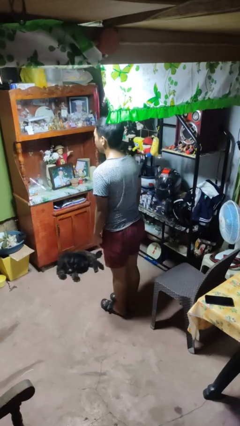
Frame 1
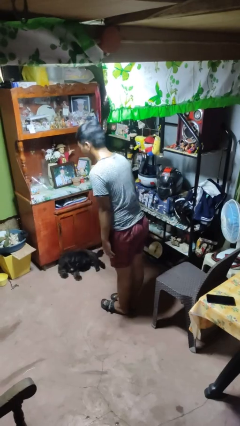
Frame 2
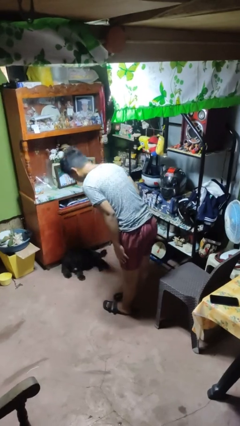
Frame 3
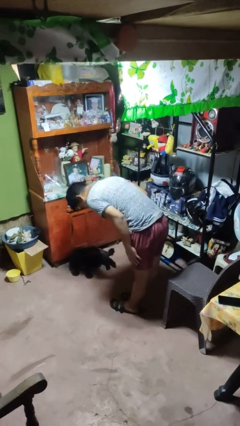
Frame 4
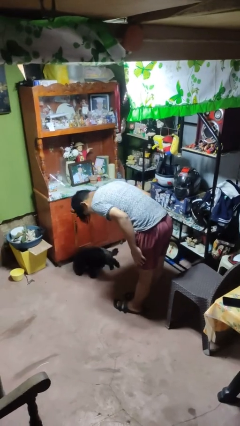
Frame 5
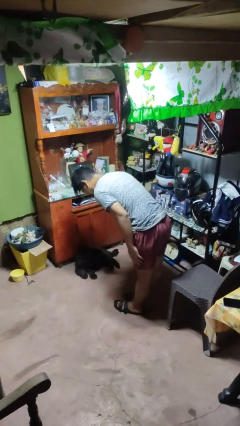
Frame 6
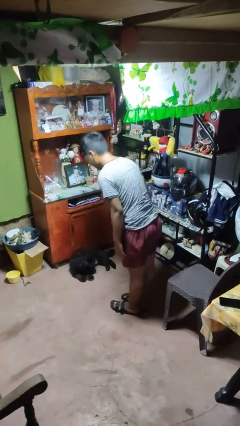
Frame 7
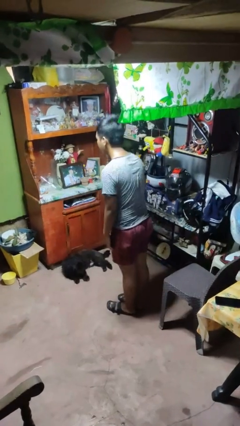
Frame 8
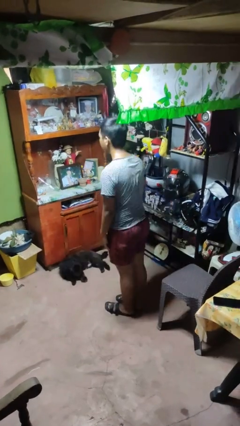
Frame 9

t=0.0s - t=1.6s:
person bows

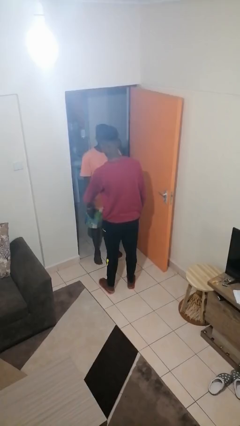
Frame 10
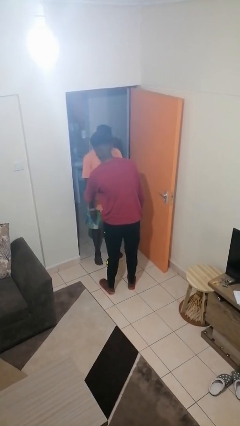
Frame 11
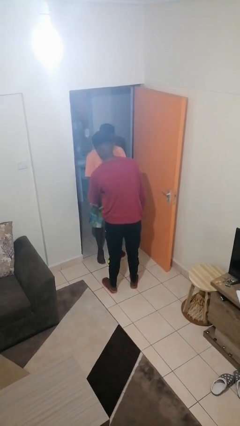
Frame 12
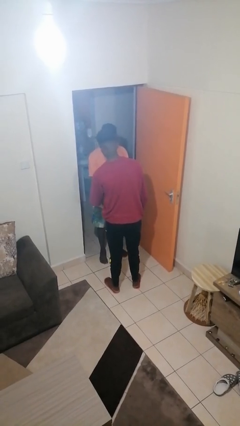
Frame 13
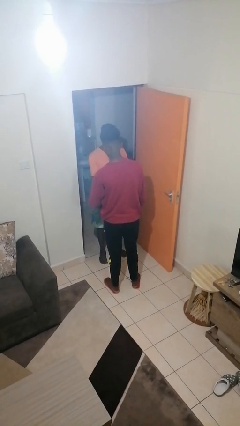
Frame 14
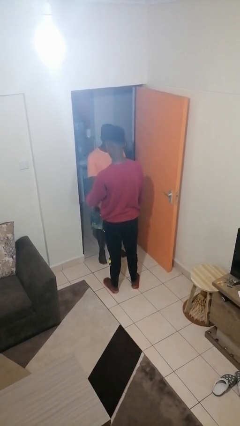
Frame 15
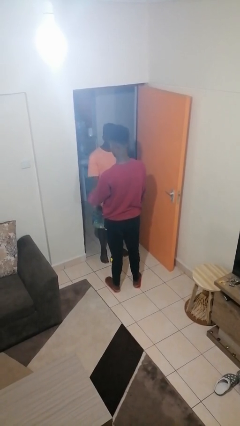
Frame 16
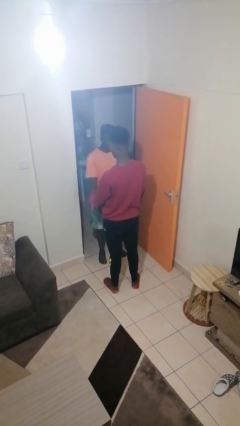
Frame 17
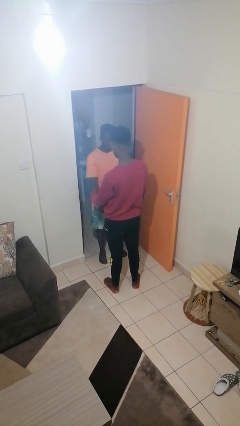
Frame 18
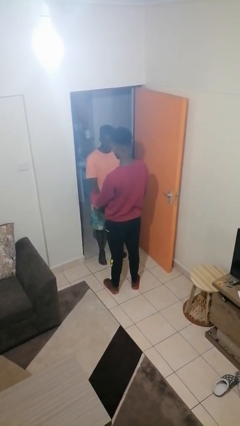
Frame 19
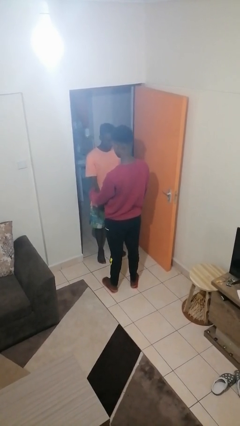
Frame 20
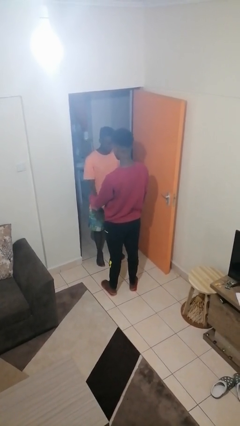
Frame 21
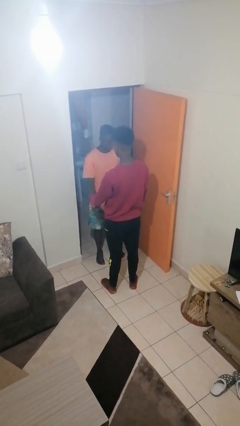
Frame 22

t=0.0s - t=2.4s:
person grabs person by forearm

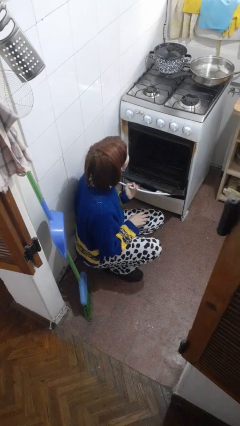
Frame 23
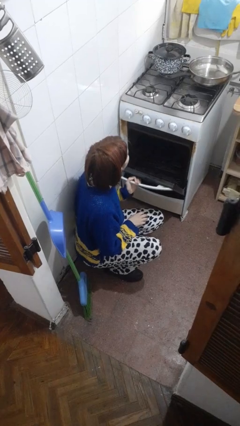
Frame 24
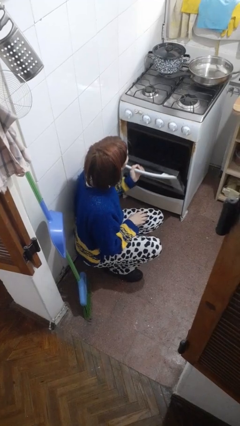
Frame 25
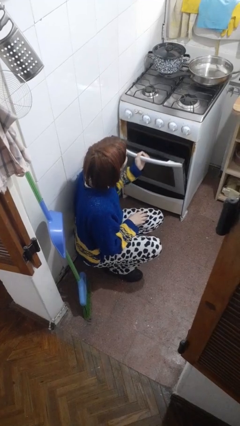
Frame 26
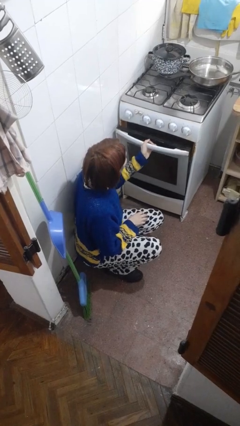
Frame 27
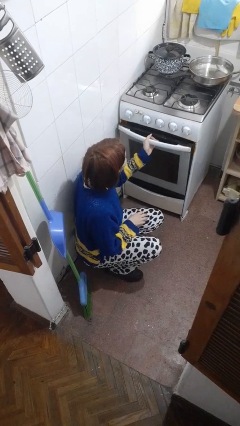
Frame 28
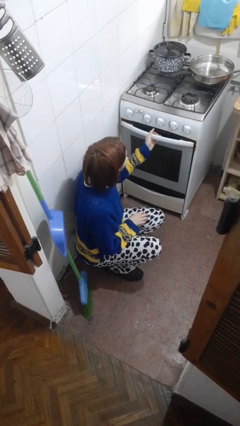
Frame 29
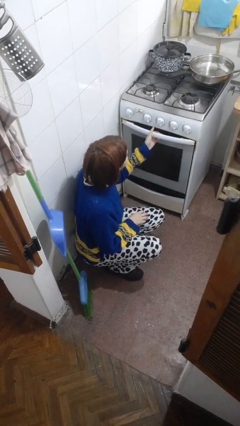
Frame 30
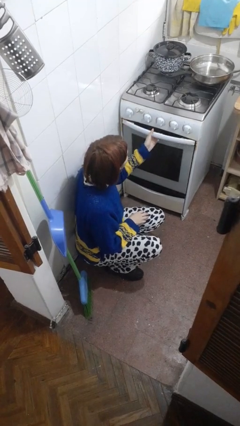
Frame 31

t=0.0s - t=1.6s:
person closes oven door

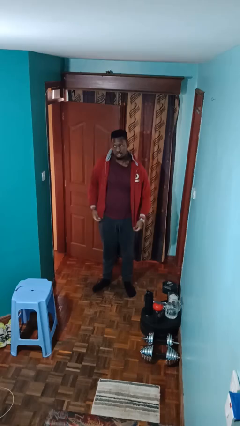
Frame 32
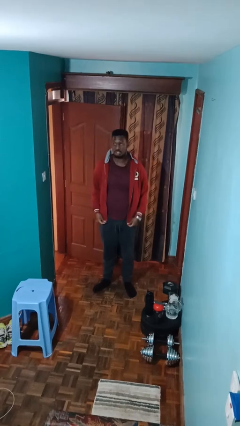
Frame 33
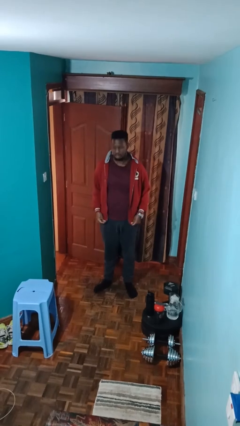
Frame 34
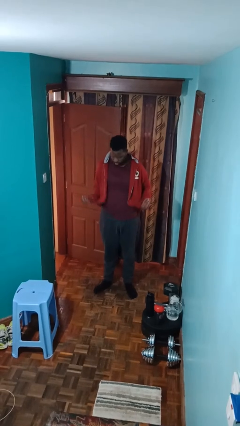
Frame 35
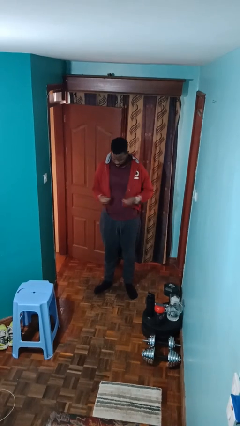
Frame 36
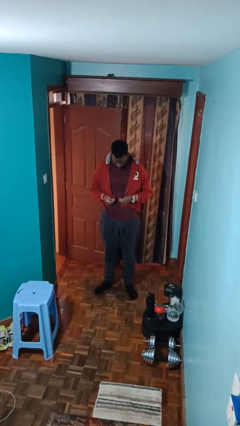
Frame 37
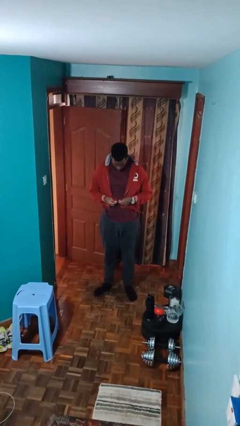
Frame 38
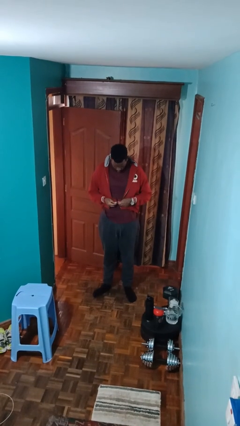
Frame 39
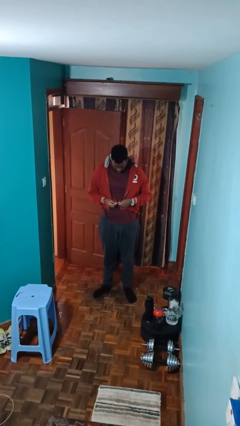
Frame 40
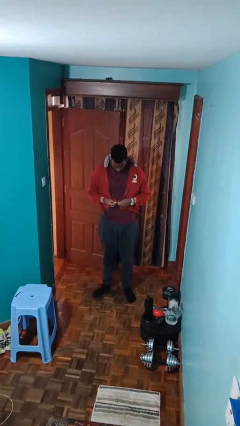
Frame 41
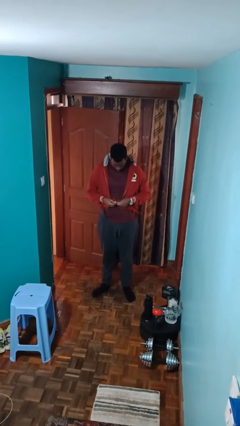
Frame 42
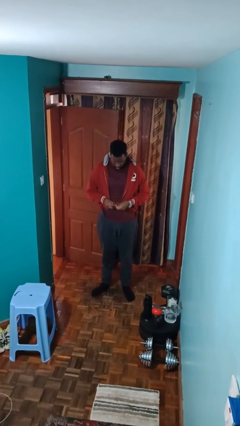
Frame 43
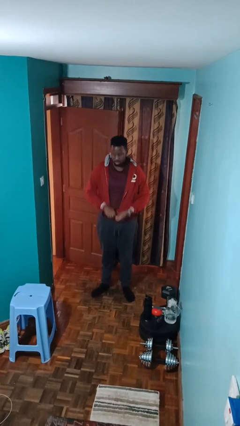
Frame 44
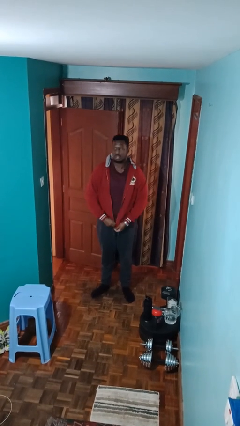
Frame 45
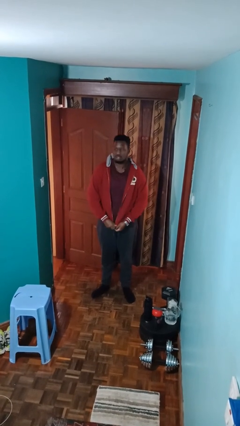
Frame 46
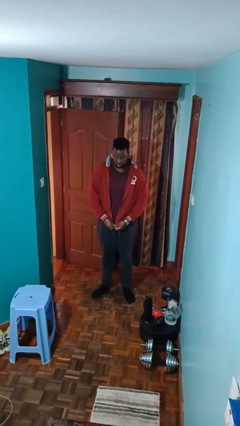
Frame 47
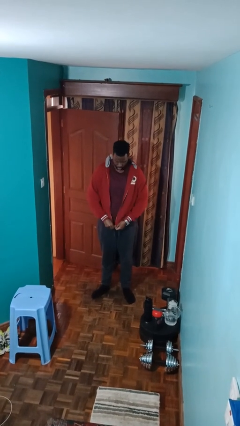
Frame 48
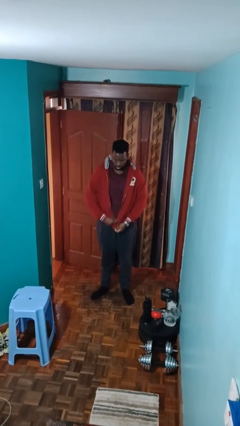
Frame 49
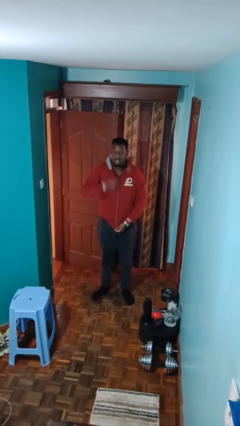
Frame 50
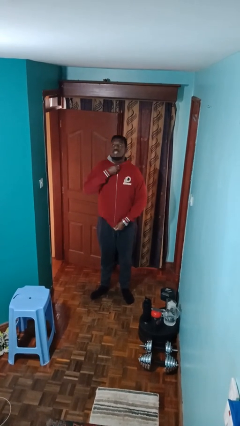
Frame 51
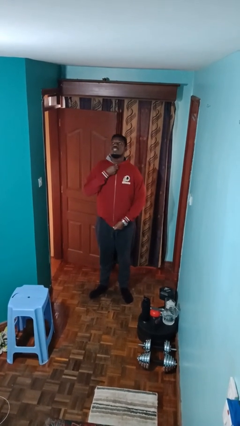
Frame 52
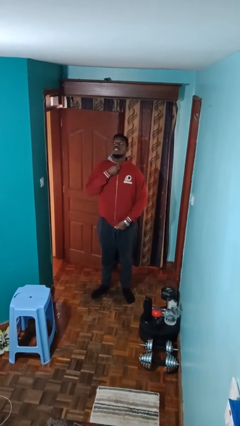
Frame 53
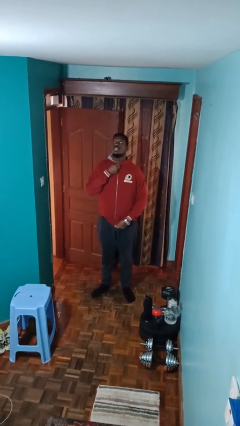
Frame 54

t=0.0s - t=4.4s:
person zips up jacket

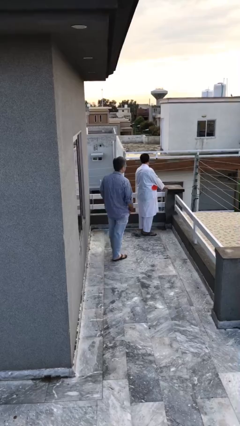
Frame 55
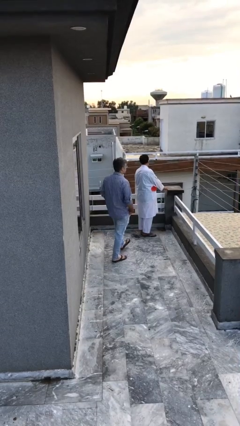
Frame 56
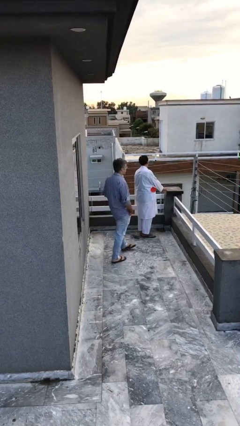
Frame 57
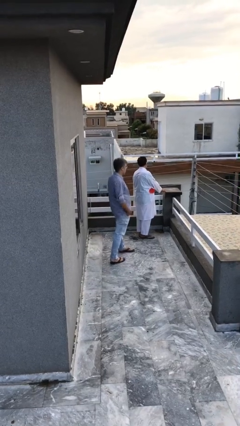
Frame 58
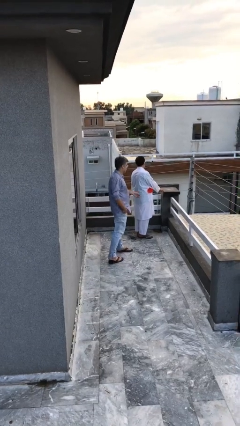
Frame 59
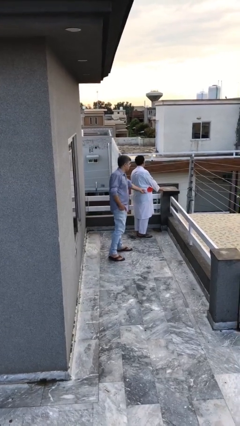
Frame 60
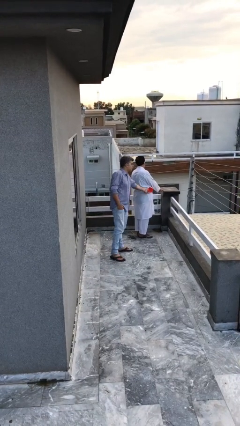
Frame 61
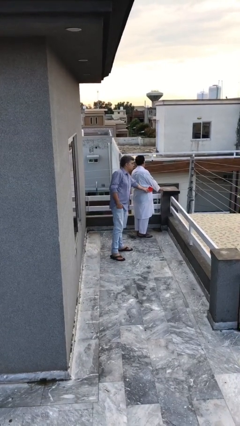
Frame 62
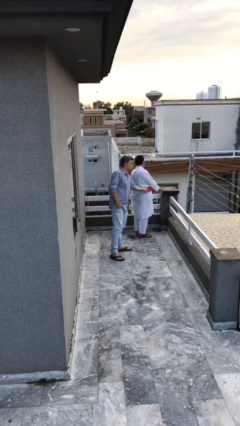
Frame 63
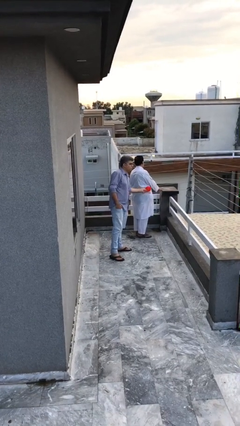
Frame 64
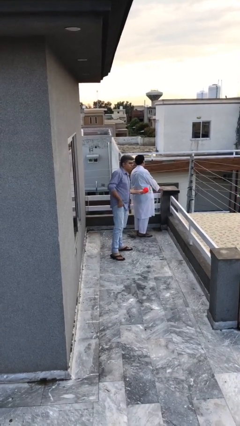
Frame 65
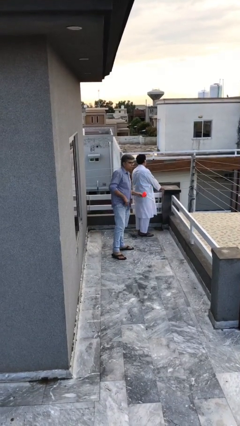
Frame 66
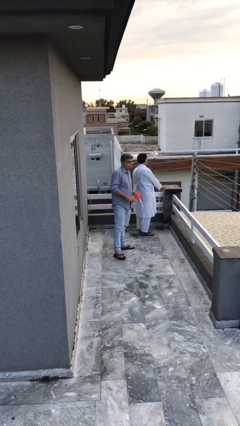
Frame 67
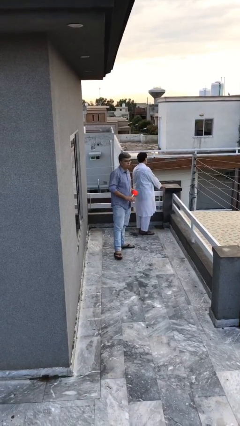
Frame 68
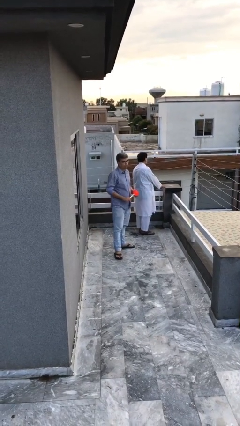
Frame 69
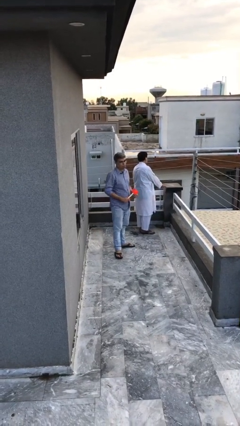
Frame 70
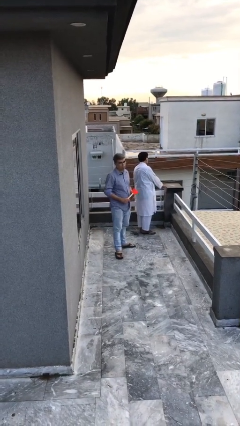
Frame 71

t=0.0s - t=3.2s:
person steals object from person

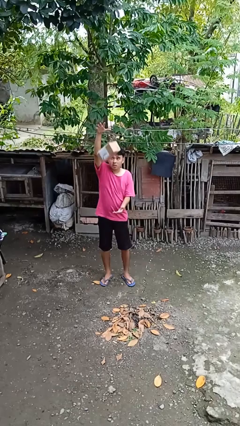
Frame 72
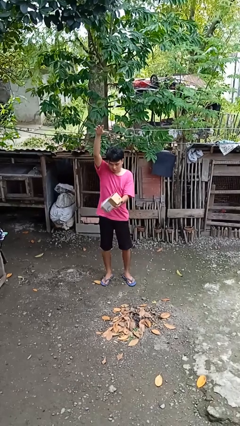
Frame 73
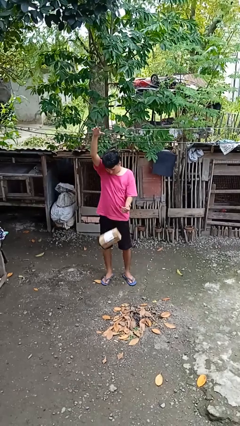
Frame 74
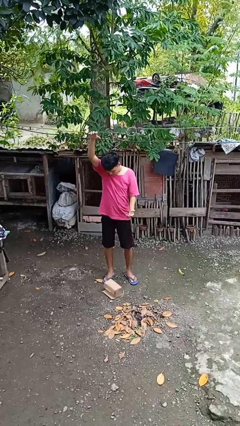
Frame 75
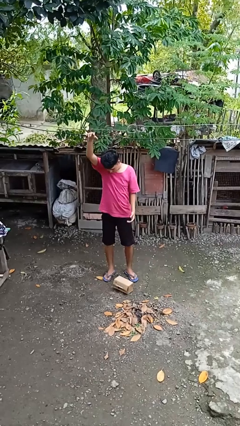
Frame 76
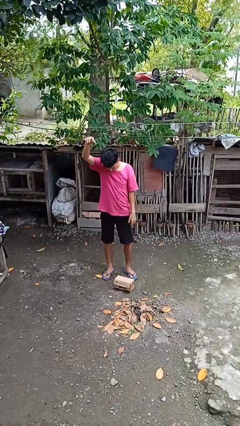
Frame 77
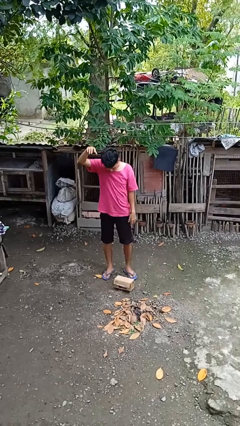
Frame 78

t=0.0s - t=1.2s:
person drops object

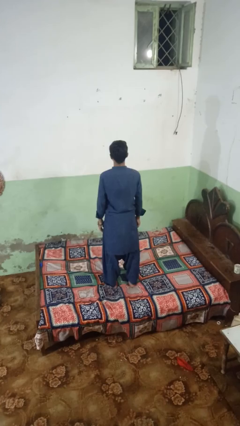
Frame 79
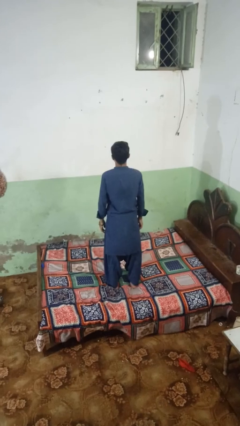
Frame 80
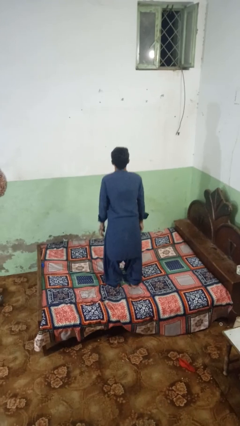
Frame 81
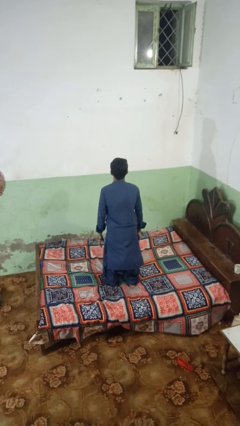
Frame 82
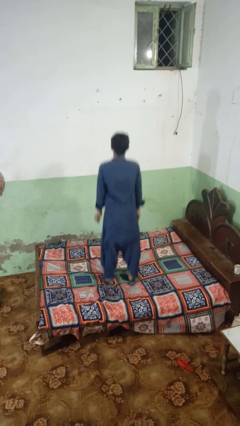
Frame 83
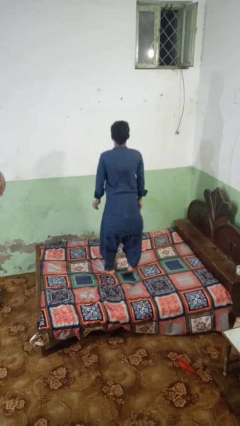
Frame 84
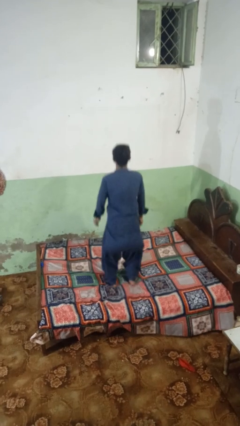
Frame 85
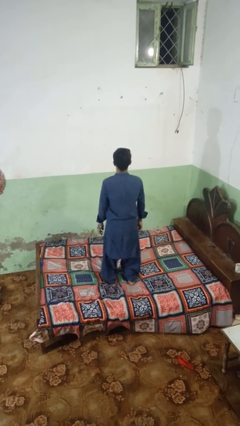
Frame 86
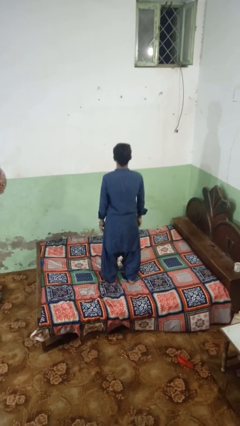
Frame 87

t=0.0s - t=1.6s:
person jumps on bed

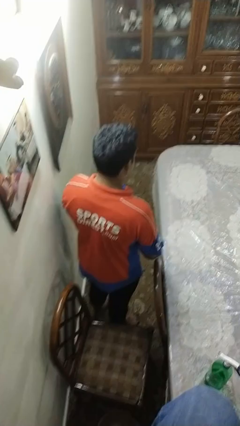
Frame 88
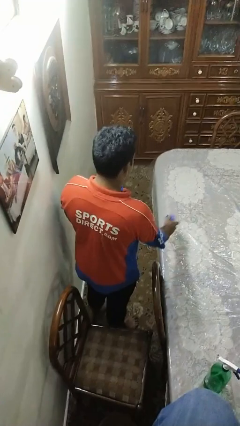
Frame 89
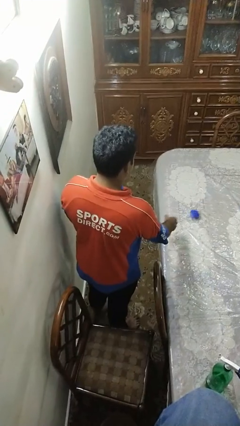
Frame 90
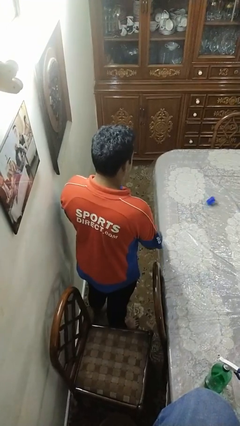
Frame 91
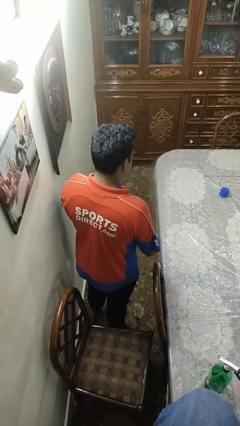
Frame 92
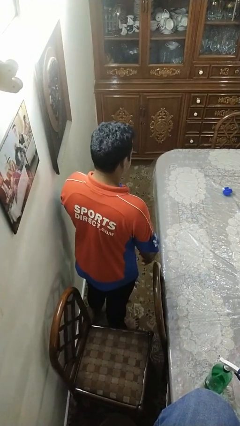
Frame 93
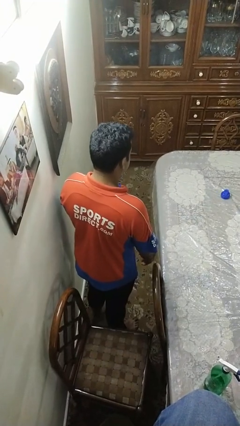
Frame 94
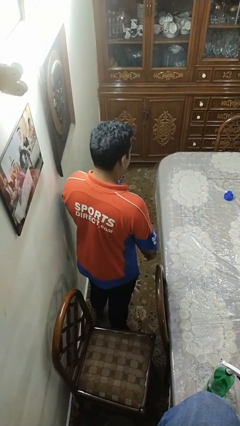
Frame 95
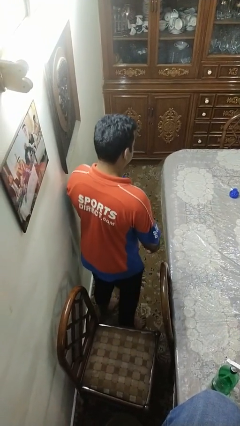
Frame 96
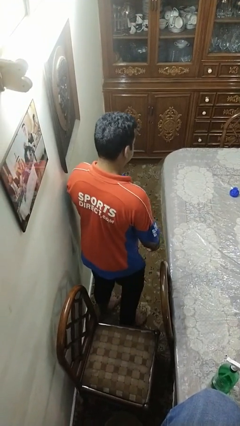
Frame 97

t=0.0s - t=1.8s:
person throws object on table
